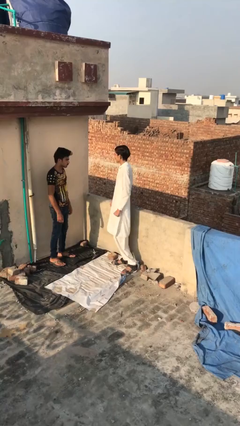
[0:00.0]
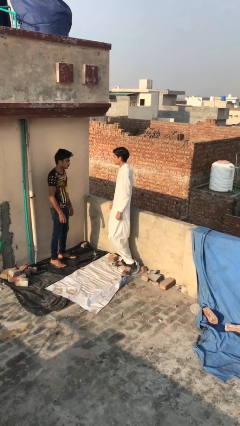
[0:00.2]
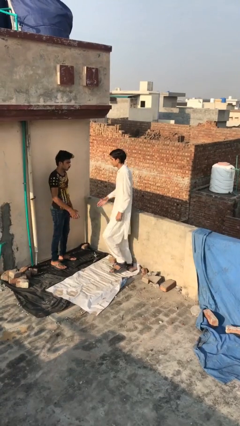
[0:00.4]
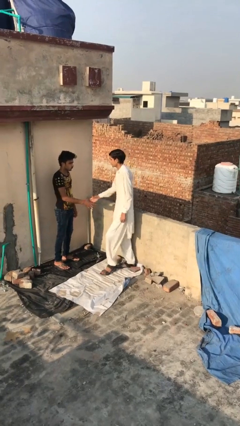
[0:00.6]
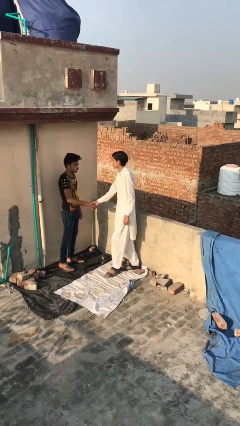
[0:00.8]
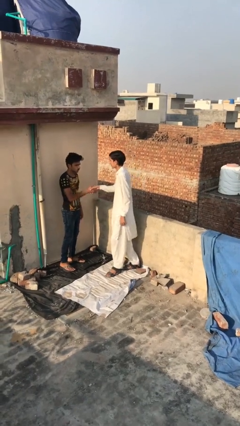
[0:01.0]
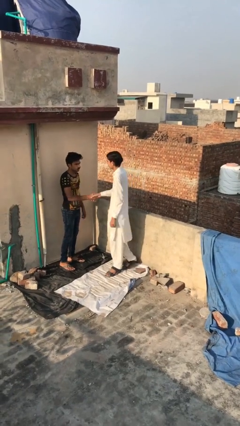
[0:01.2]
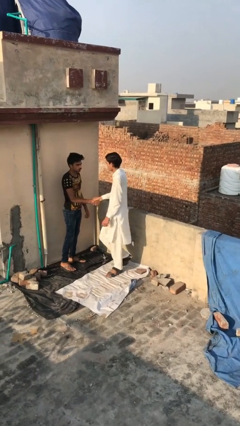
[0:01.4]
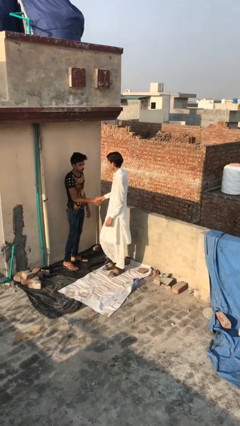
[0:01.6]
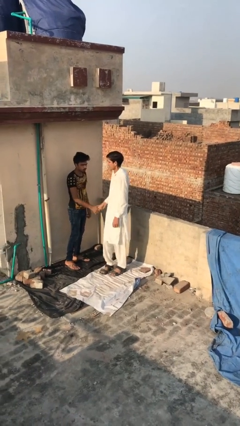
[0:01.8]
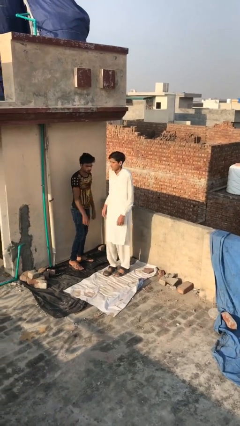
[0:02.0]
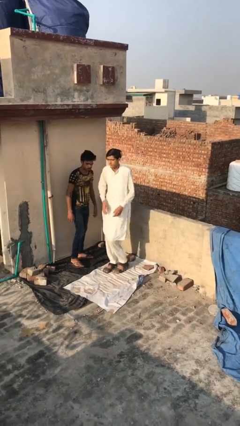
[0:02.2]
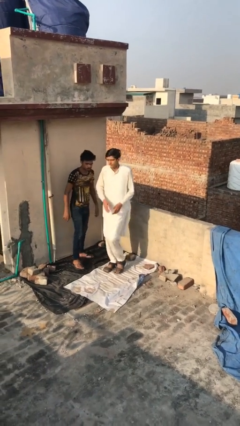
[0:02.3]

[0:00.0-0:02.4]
person shakes hand

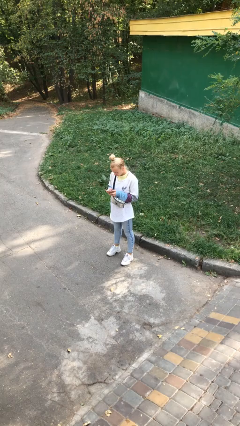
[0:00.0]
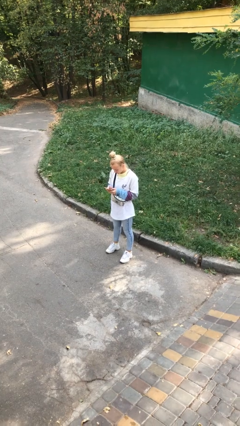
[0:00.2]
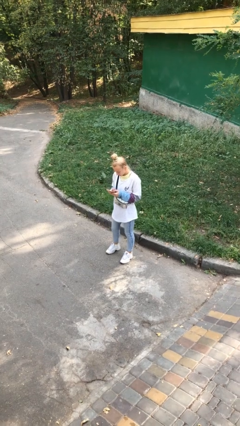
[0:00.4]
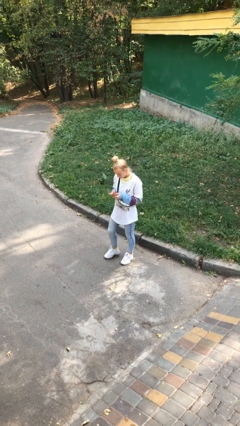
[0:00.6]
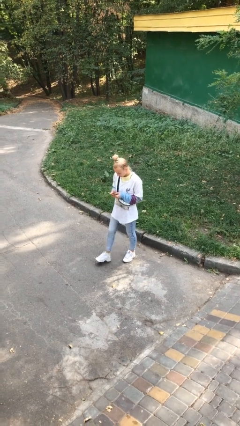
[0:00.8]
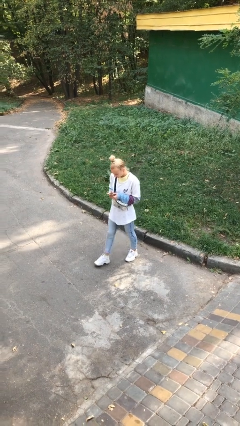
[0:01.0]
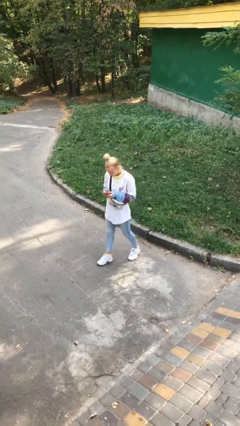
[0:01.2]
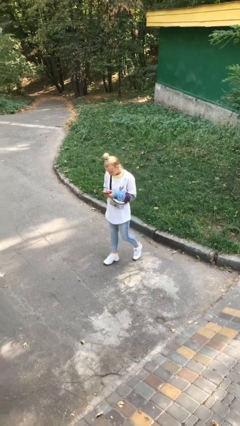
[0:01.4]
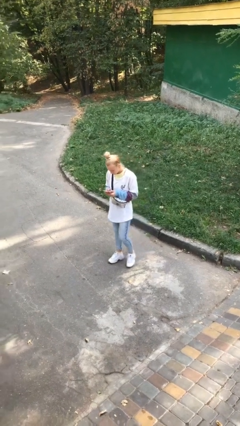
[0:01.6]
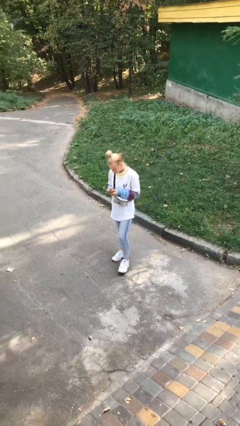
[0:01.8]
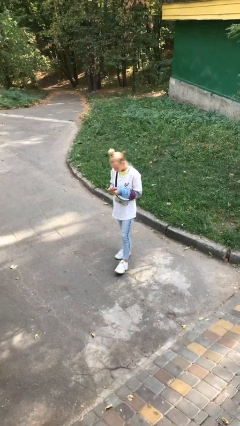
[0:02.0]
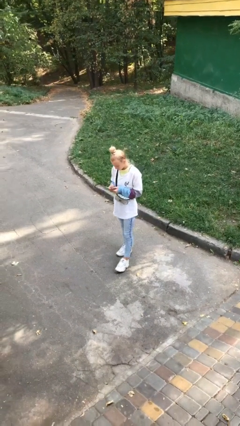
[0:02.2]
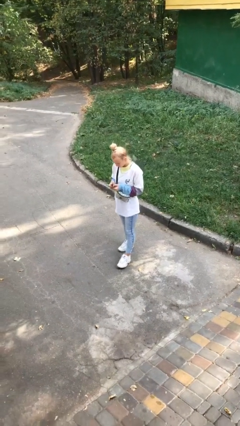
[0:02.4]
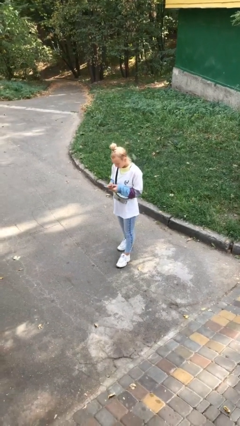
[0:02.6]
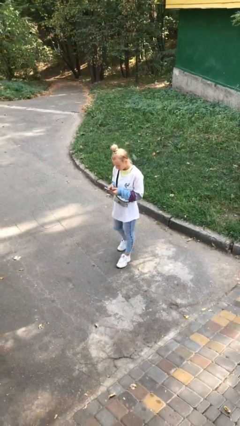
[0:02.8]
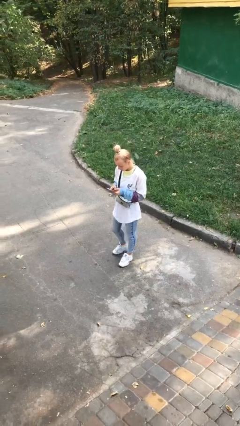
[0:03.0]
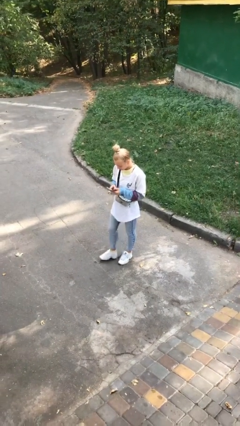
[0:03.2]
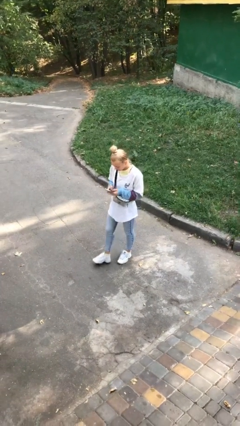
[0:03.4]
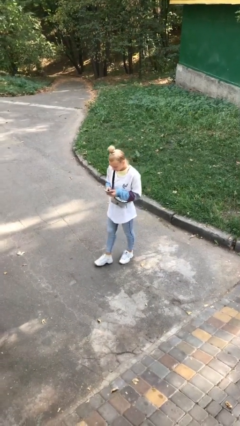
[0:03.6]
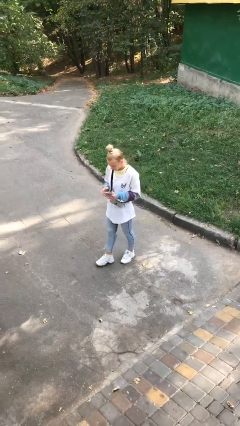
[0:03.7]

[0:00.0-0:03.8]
person texts on phone

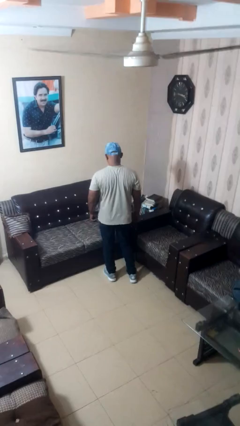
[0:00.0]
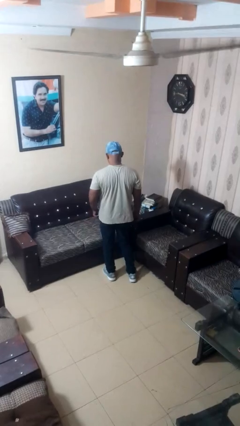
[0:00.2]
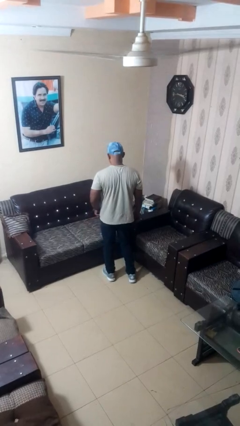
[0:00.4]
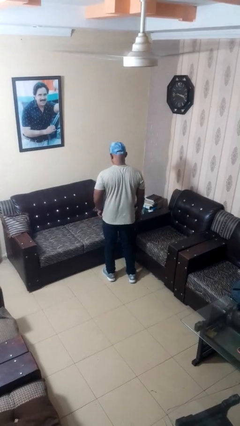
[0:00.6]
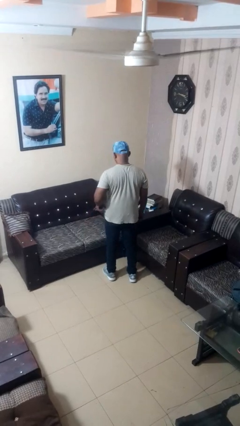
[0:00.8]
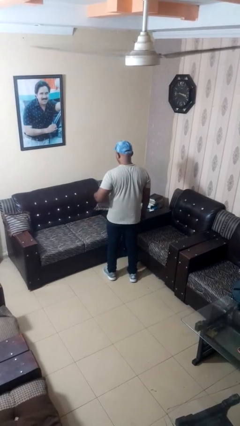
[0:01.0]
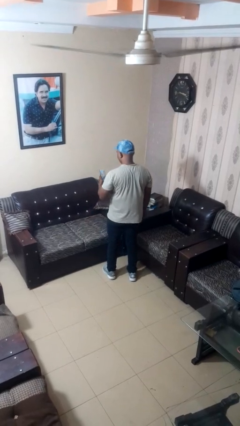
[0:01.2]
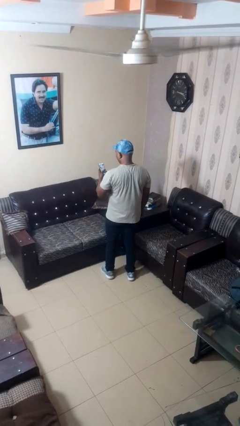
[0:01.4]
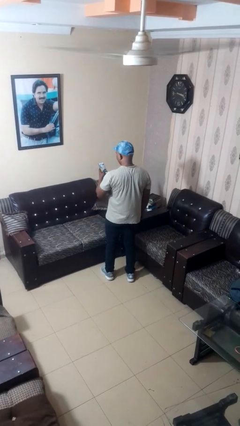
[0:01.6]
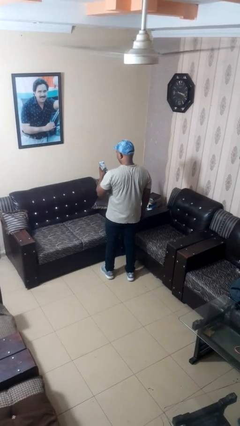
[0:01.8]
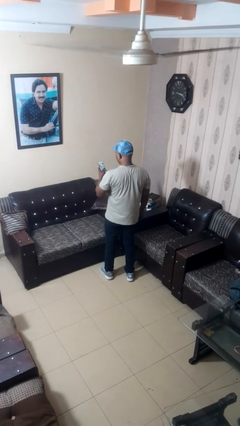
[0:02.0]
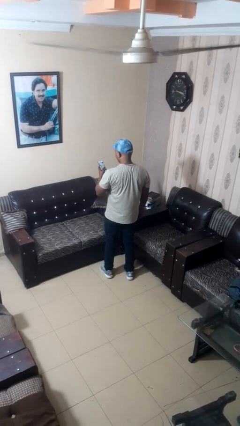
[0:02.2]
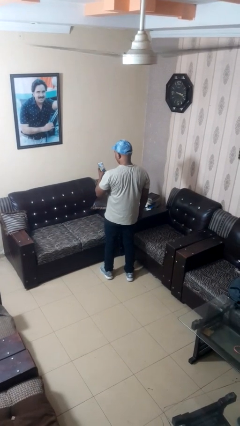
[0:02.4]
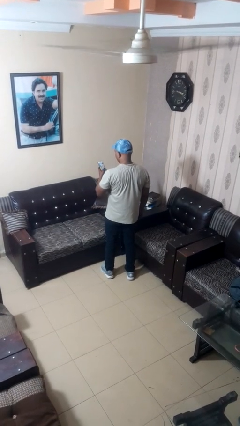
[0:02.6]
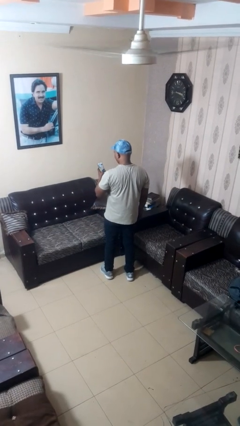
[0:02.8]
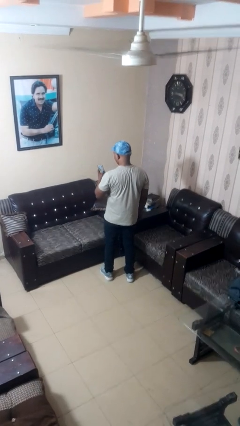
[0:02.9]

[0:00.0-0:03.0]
person takes phone from pocket

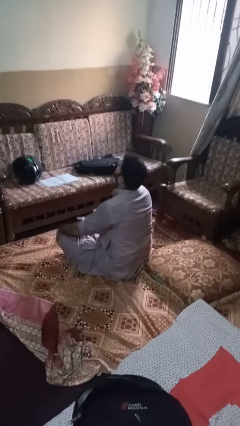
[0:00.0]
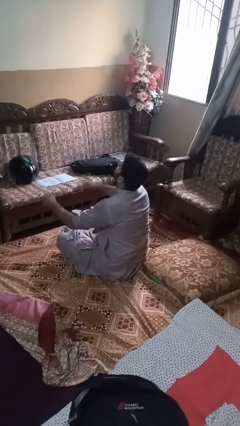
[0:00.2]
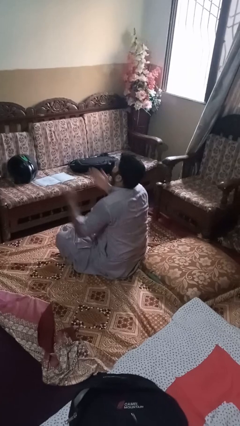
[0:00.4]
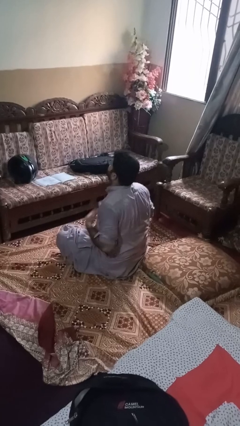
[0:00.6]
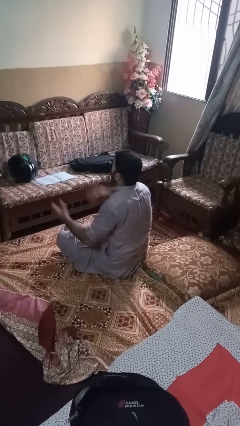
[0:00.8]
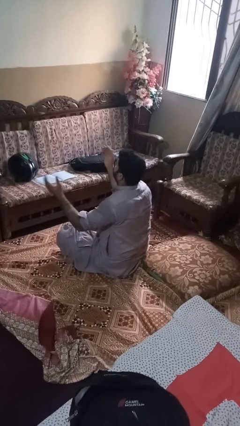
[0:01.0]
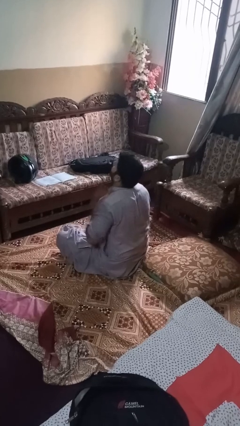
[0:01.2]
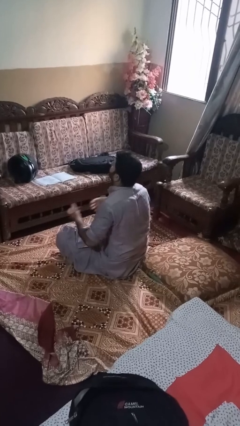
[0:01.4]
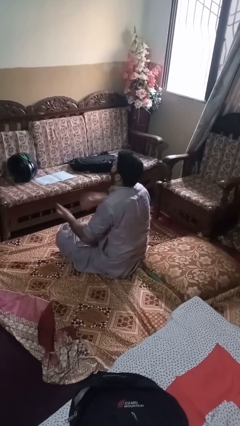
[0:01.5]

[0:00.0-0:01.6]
person drums on chest

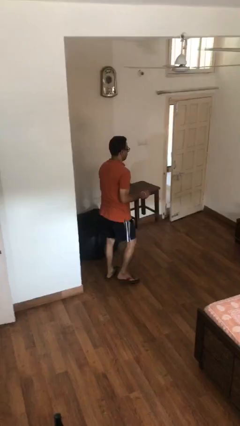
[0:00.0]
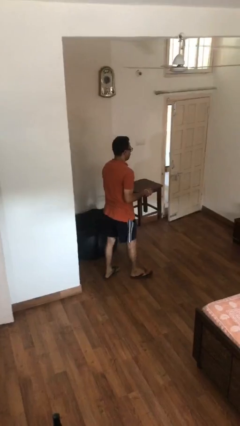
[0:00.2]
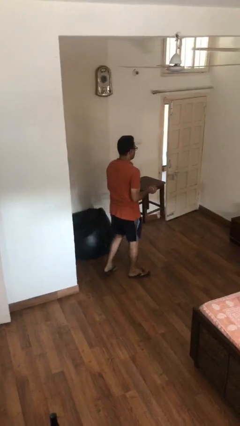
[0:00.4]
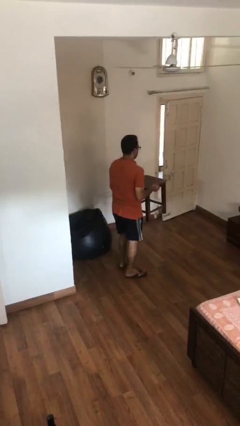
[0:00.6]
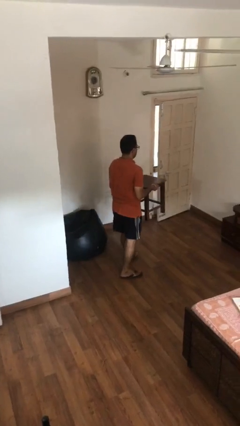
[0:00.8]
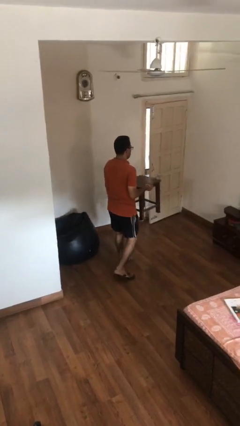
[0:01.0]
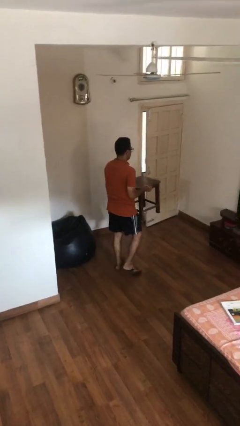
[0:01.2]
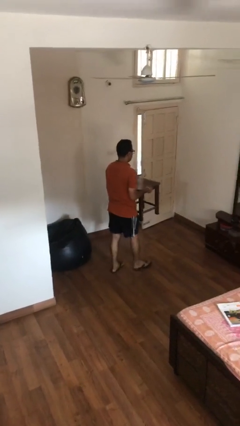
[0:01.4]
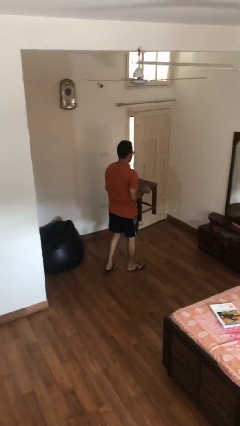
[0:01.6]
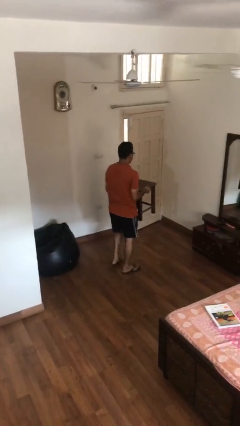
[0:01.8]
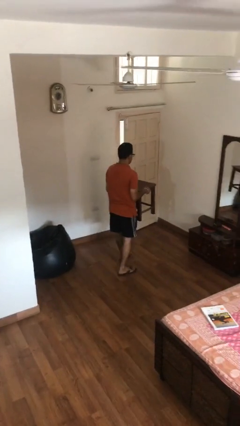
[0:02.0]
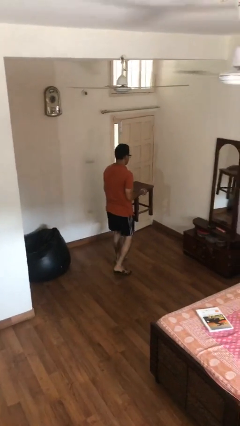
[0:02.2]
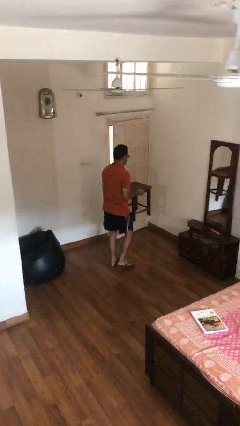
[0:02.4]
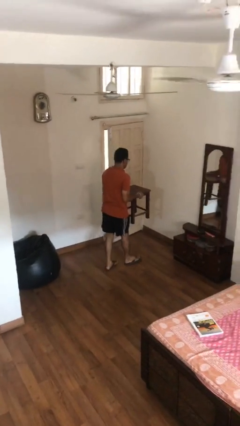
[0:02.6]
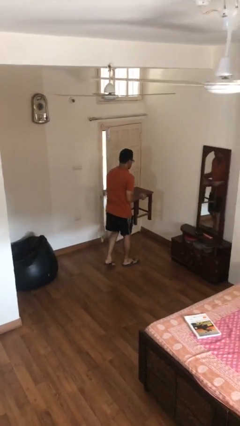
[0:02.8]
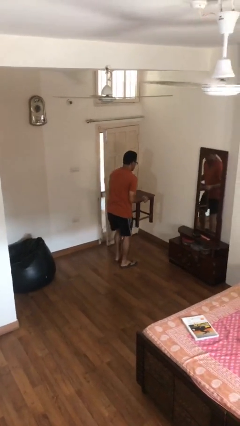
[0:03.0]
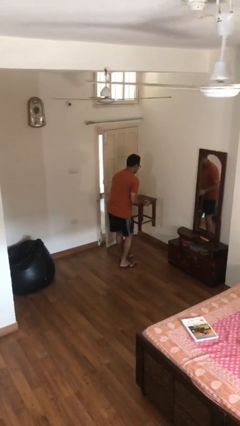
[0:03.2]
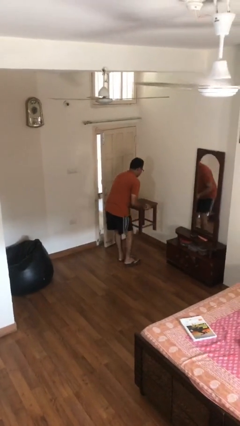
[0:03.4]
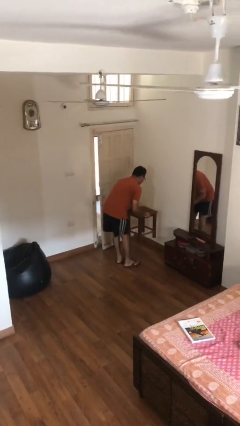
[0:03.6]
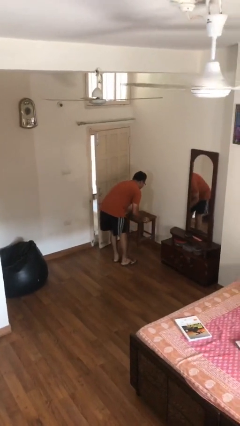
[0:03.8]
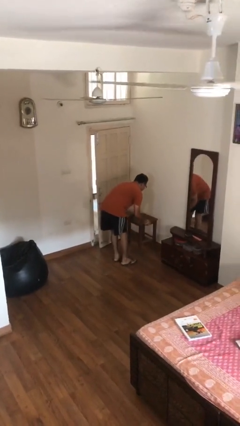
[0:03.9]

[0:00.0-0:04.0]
person carries heavy object

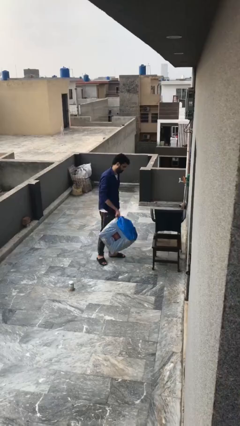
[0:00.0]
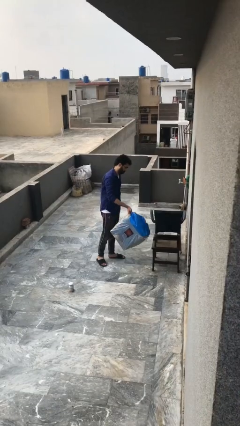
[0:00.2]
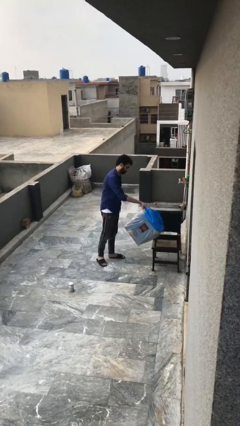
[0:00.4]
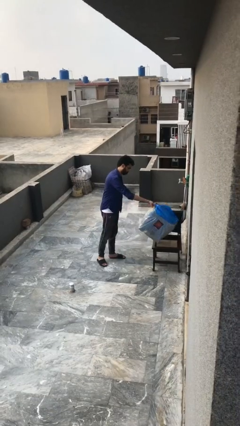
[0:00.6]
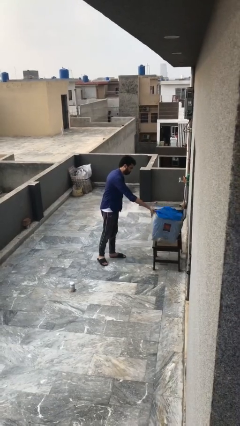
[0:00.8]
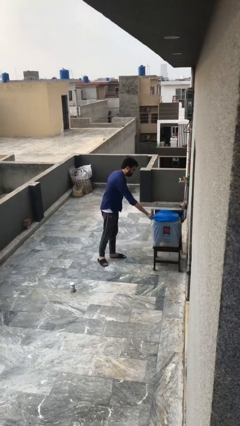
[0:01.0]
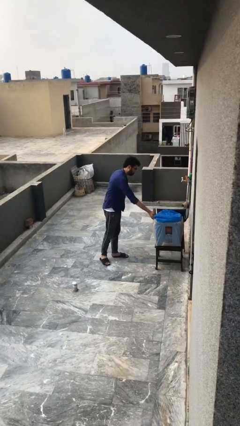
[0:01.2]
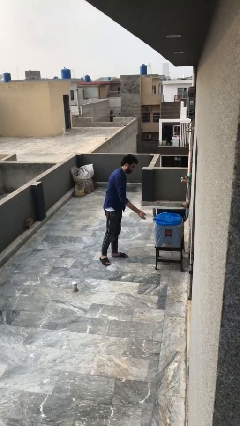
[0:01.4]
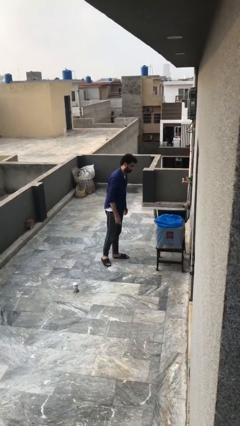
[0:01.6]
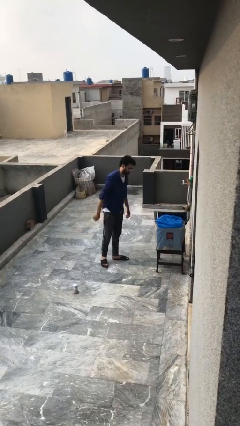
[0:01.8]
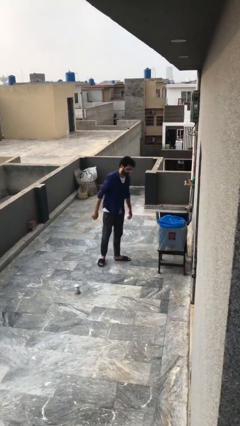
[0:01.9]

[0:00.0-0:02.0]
person puts down object on table

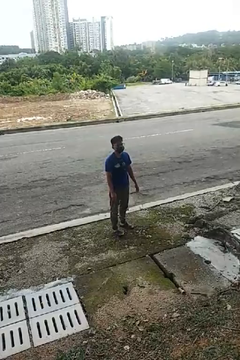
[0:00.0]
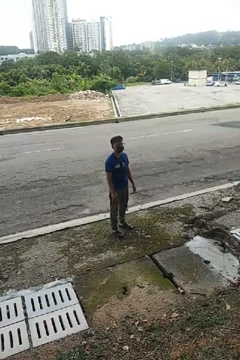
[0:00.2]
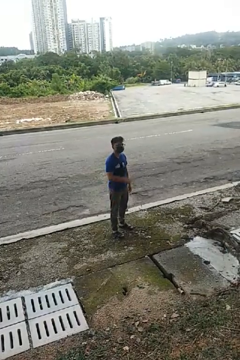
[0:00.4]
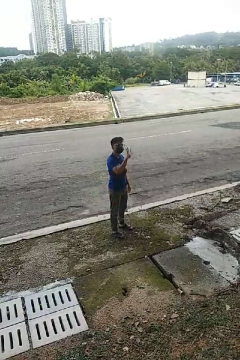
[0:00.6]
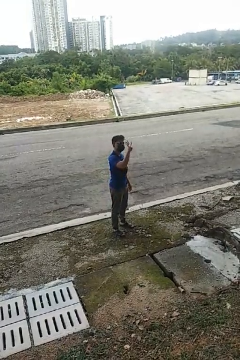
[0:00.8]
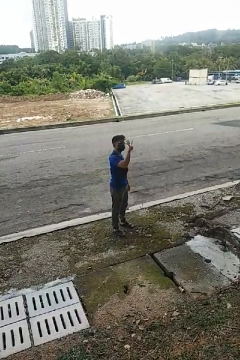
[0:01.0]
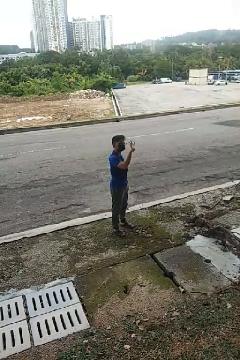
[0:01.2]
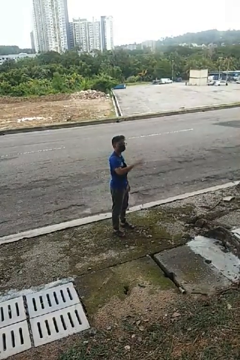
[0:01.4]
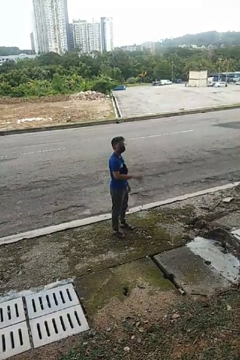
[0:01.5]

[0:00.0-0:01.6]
person gestures number four
